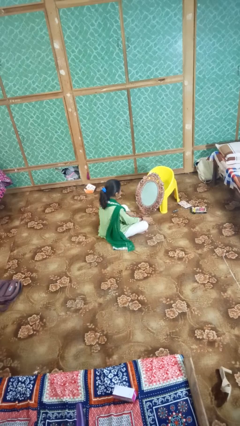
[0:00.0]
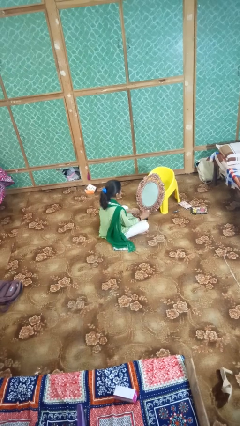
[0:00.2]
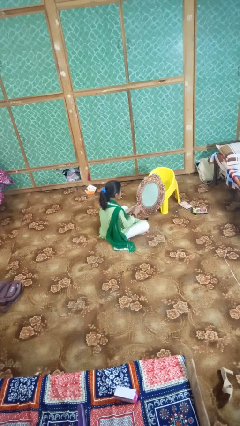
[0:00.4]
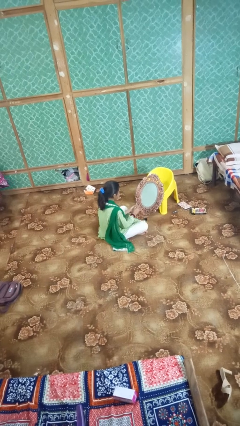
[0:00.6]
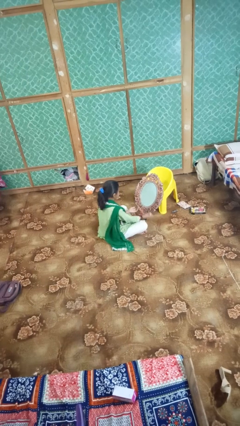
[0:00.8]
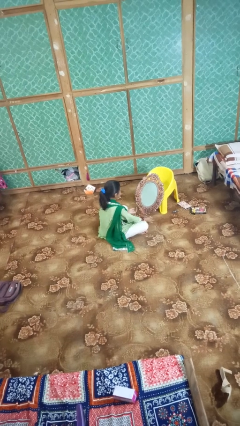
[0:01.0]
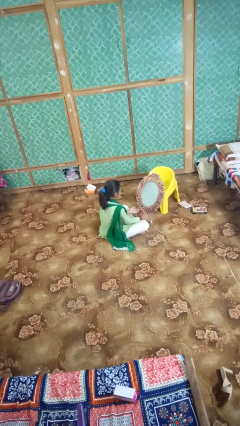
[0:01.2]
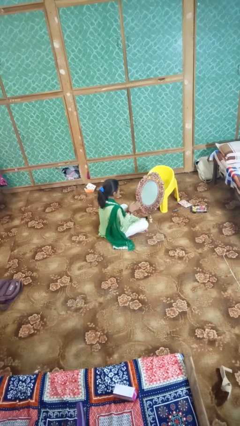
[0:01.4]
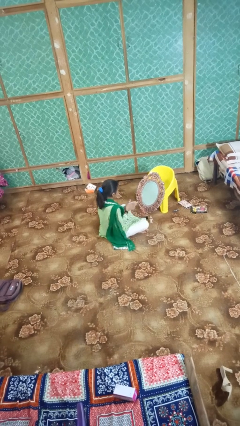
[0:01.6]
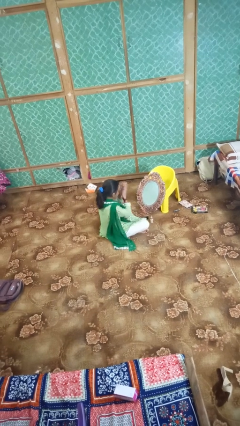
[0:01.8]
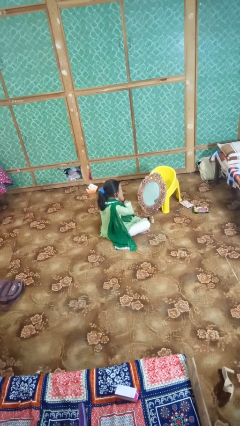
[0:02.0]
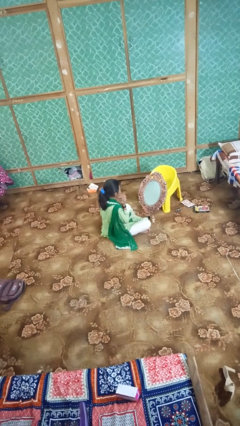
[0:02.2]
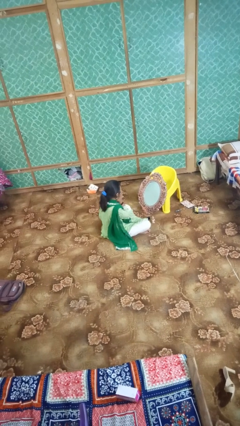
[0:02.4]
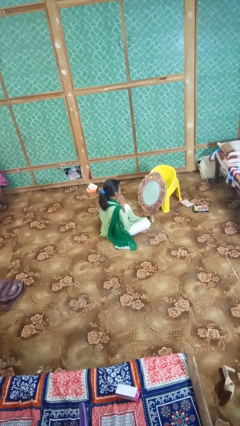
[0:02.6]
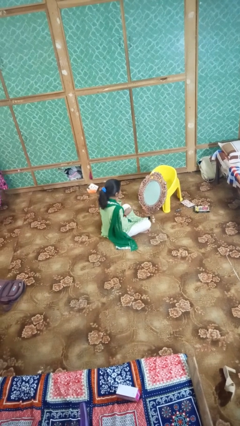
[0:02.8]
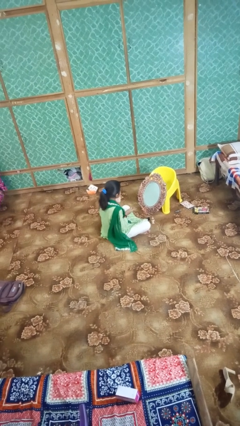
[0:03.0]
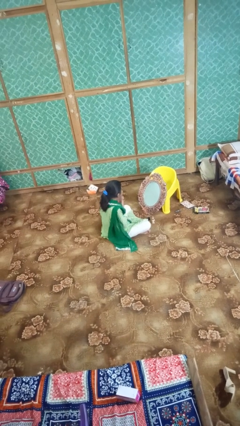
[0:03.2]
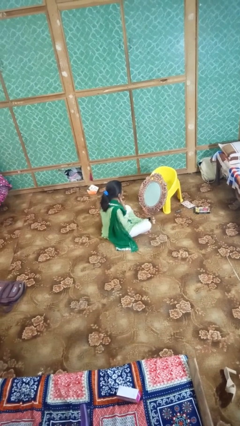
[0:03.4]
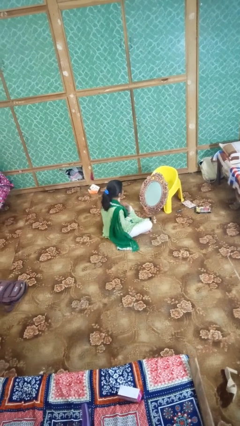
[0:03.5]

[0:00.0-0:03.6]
person applies foundation makeup

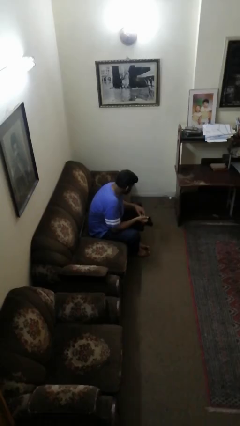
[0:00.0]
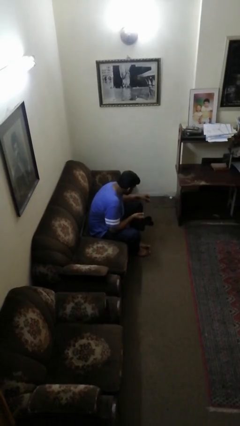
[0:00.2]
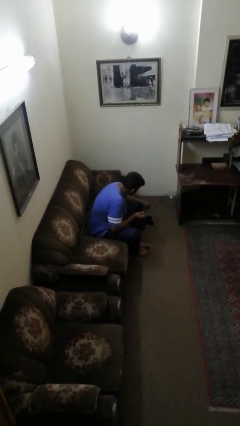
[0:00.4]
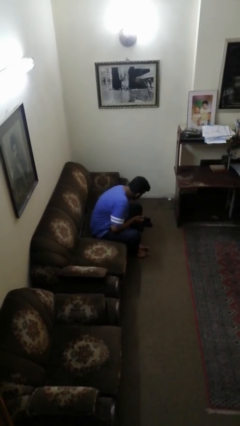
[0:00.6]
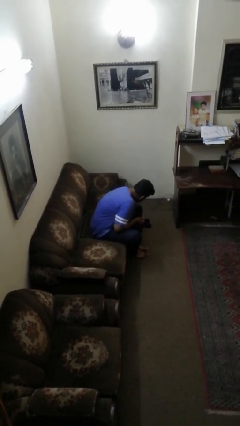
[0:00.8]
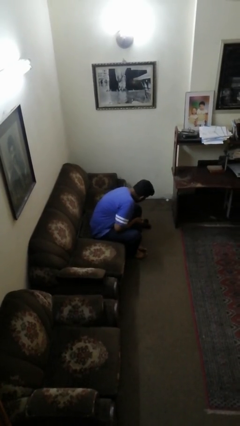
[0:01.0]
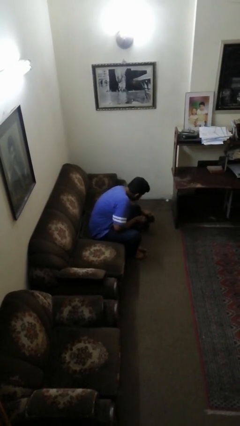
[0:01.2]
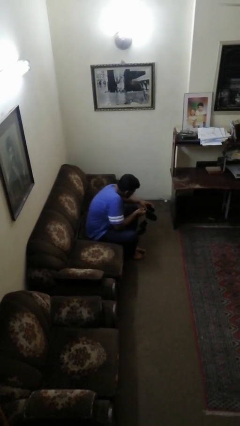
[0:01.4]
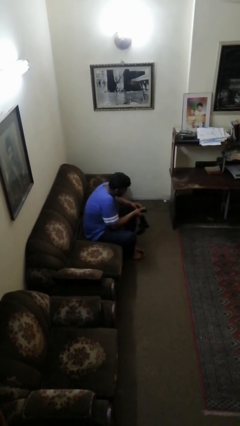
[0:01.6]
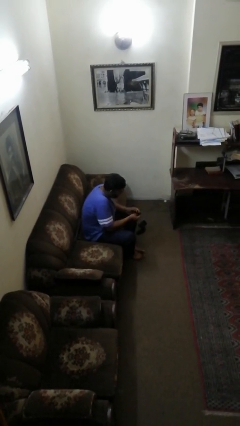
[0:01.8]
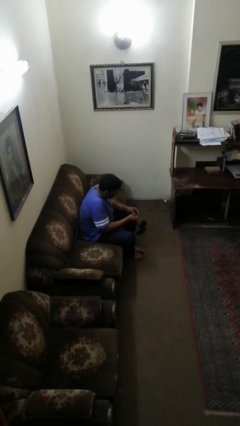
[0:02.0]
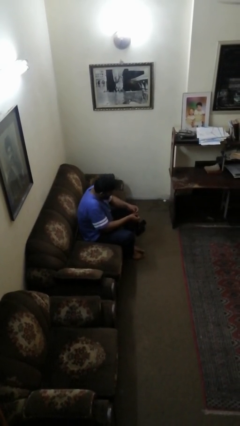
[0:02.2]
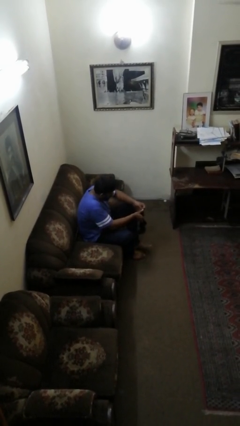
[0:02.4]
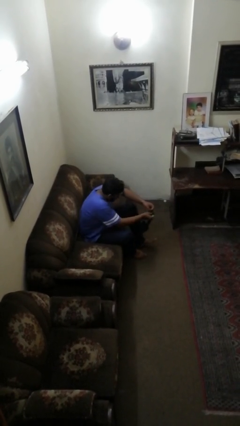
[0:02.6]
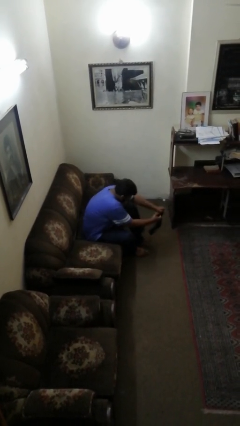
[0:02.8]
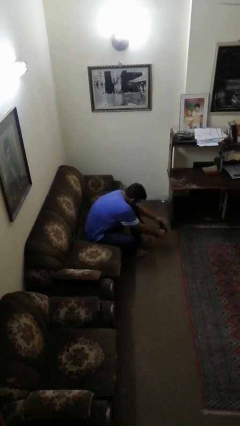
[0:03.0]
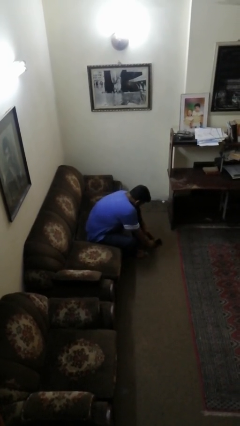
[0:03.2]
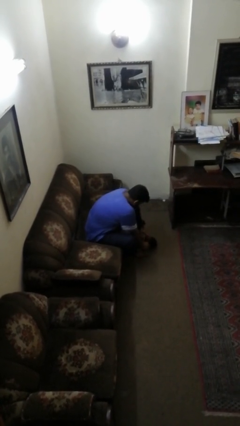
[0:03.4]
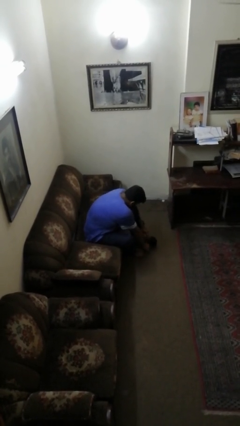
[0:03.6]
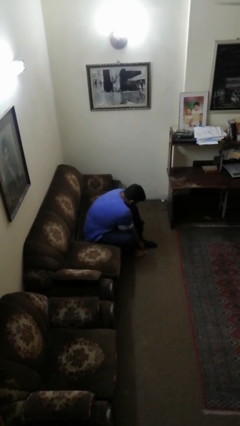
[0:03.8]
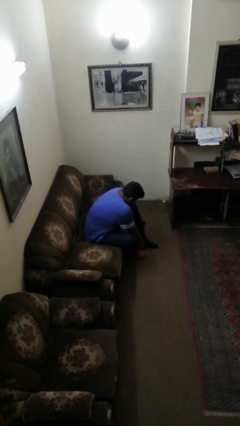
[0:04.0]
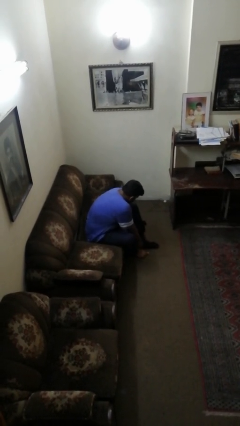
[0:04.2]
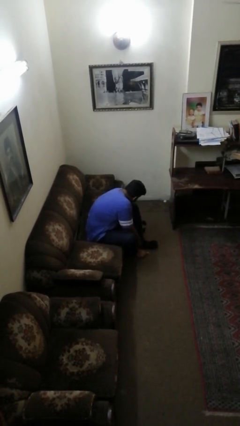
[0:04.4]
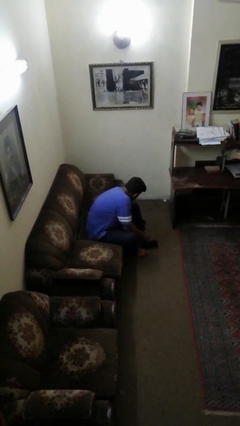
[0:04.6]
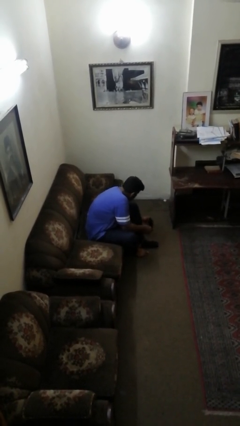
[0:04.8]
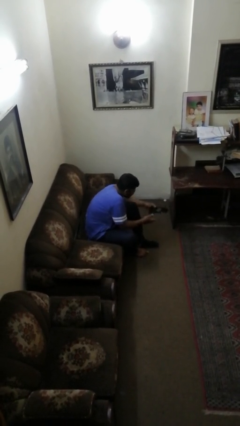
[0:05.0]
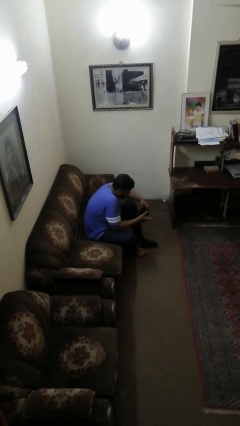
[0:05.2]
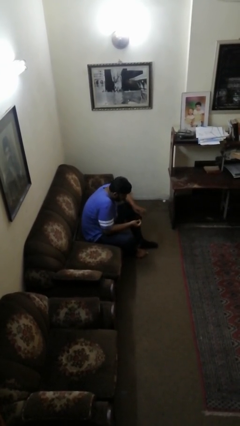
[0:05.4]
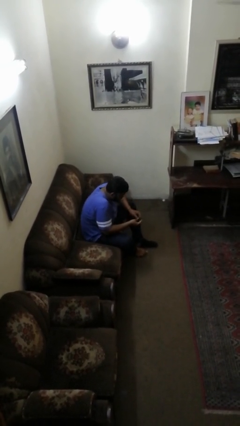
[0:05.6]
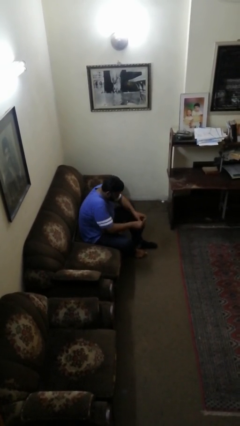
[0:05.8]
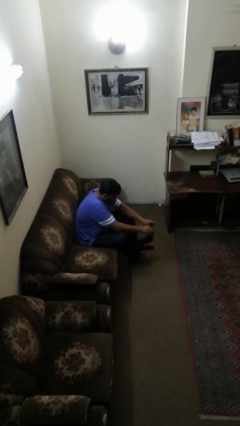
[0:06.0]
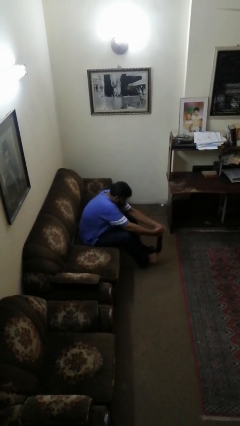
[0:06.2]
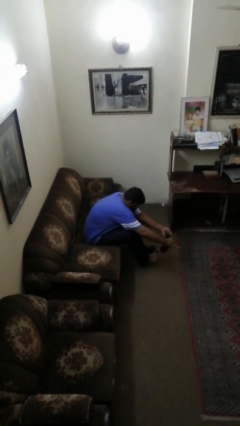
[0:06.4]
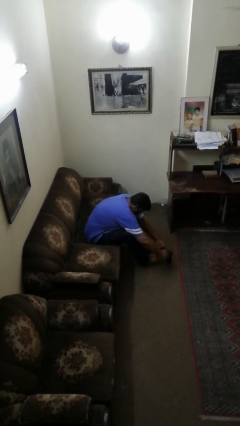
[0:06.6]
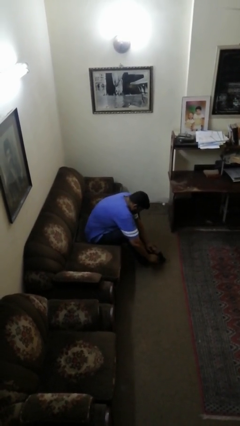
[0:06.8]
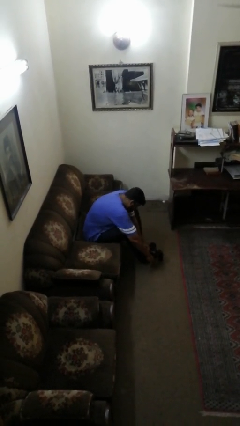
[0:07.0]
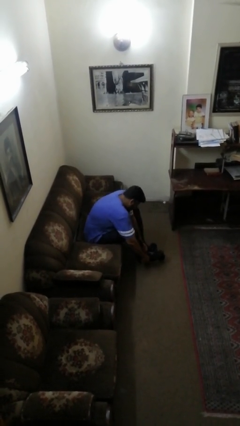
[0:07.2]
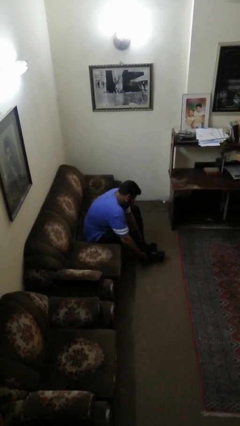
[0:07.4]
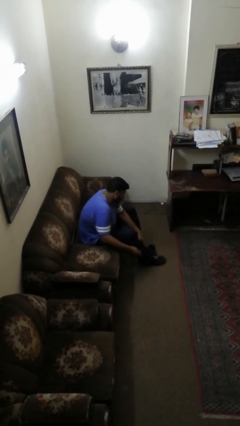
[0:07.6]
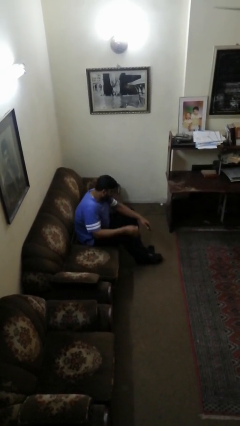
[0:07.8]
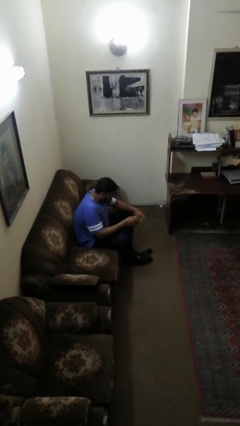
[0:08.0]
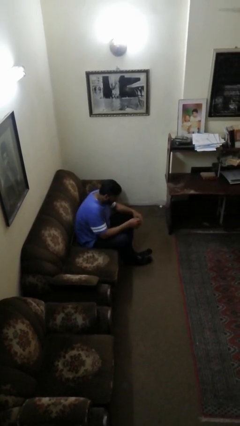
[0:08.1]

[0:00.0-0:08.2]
person puts on socks

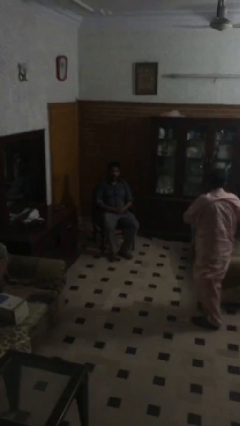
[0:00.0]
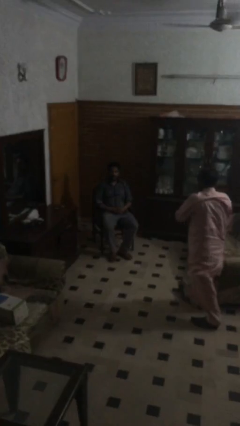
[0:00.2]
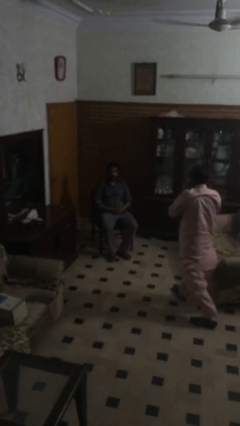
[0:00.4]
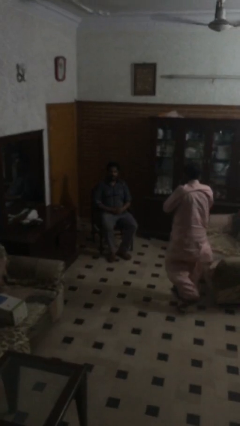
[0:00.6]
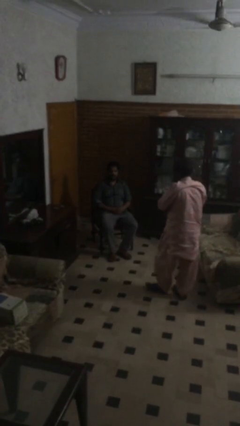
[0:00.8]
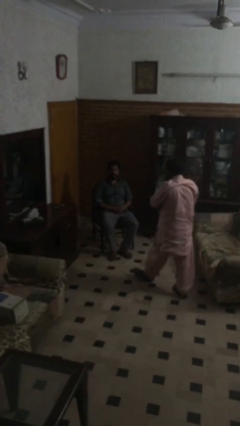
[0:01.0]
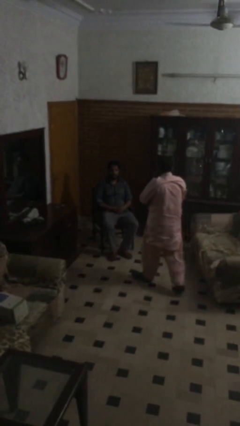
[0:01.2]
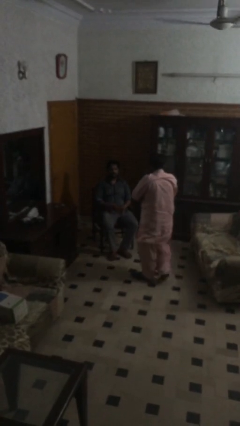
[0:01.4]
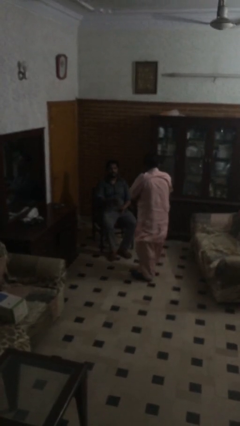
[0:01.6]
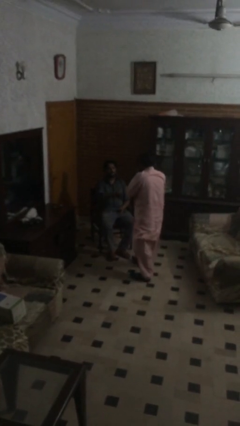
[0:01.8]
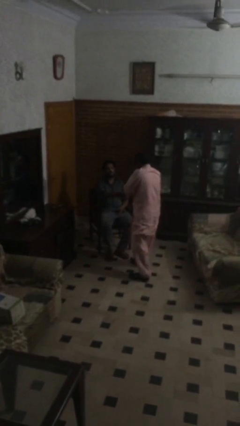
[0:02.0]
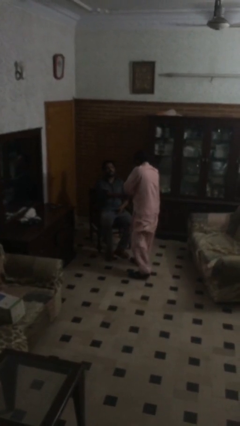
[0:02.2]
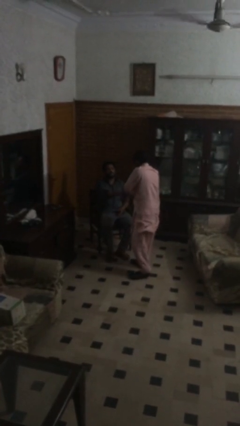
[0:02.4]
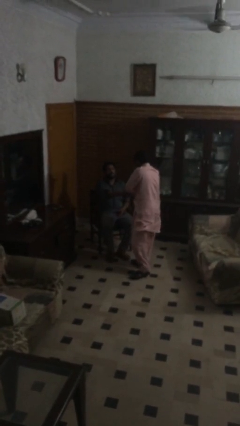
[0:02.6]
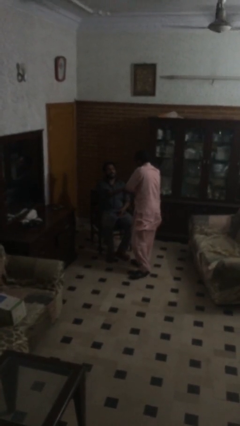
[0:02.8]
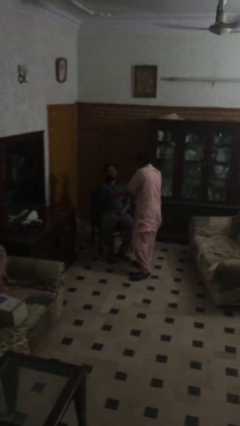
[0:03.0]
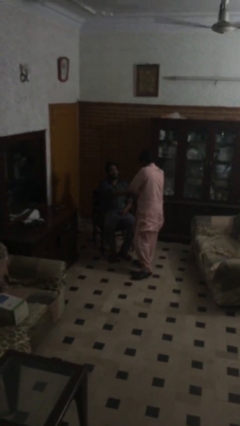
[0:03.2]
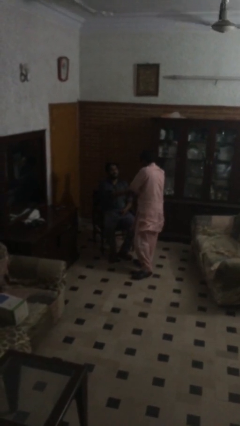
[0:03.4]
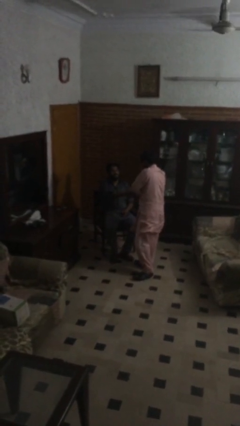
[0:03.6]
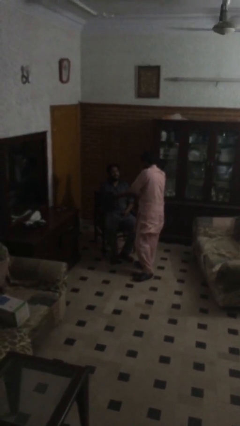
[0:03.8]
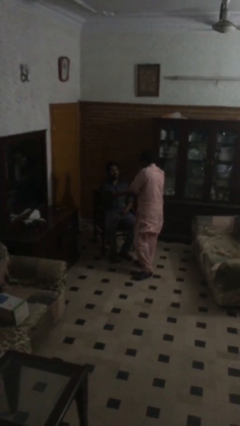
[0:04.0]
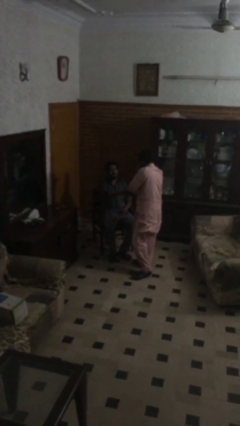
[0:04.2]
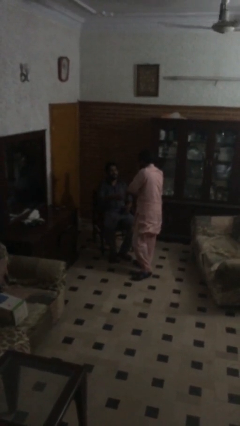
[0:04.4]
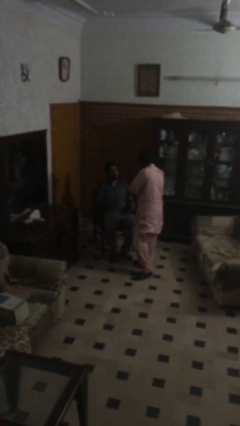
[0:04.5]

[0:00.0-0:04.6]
person shakes hand

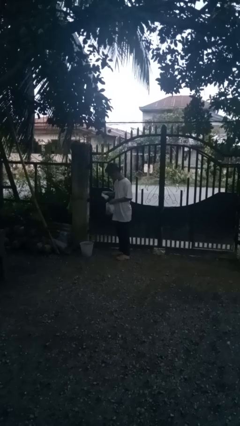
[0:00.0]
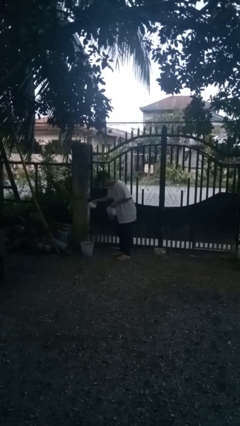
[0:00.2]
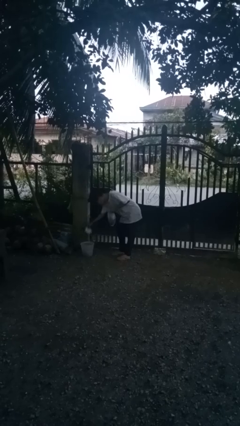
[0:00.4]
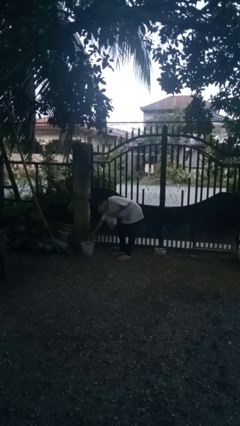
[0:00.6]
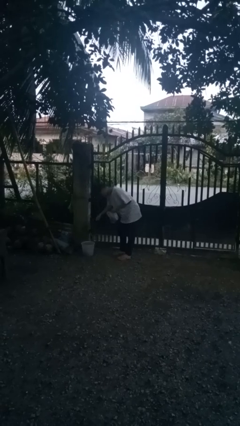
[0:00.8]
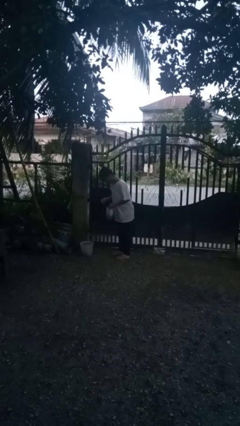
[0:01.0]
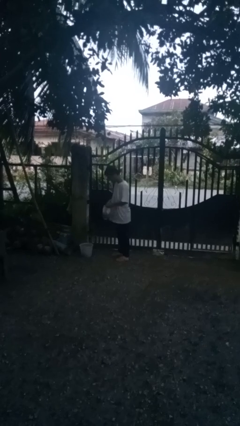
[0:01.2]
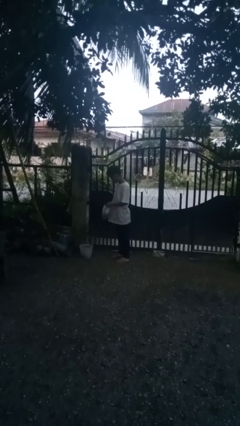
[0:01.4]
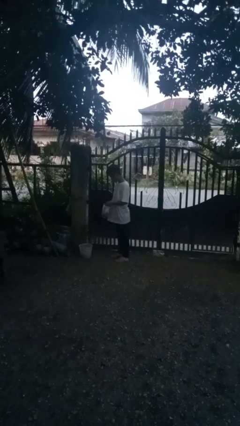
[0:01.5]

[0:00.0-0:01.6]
person discards trash

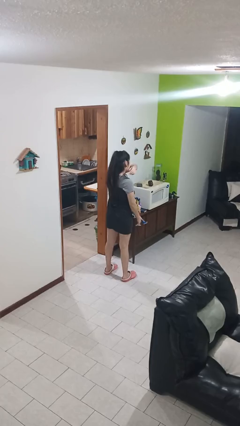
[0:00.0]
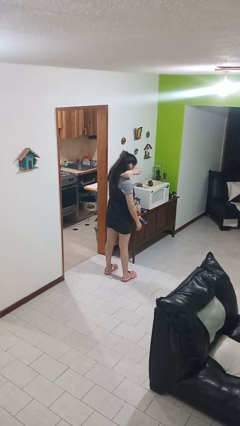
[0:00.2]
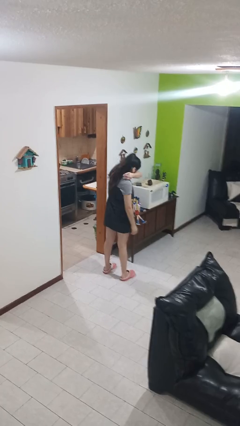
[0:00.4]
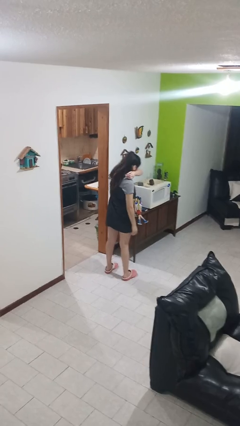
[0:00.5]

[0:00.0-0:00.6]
person sneezes into arm
